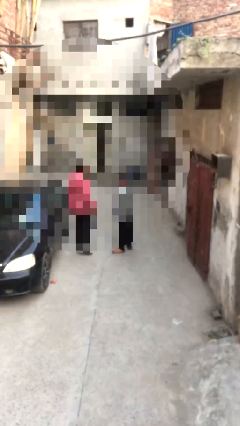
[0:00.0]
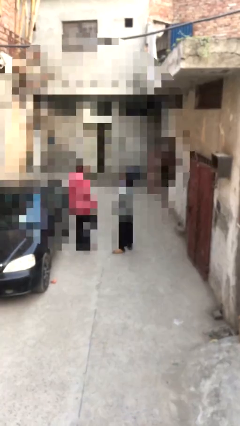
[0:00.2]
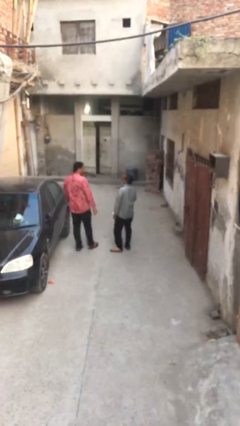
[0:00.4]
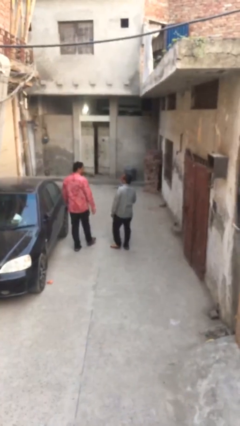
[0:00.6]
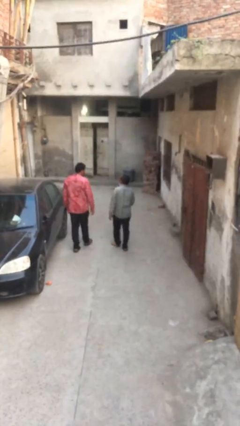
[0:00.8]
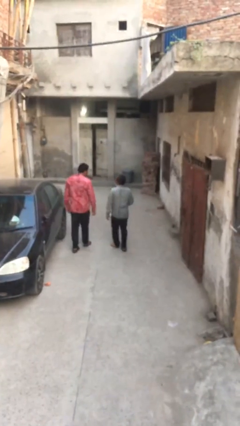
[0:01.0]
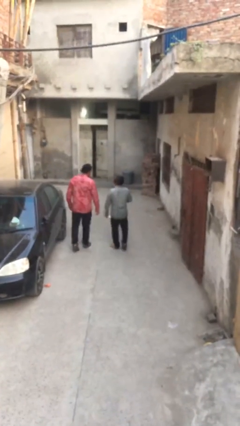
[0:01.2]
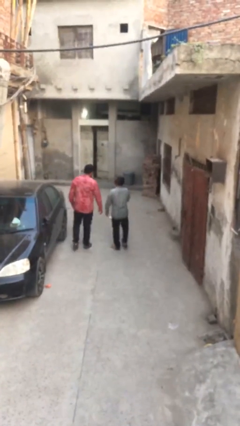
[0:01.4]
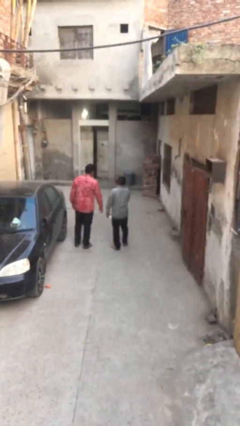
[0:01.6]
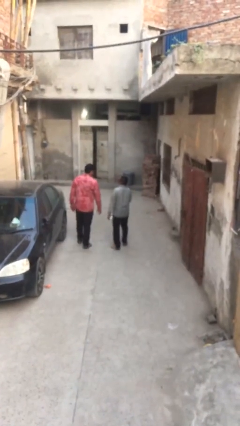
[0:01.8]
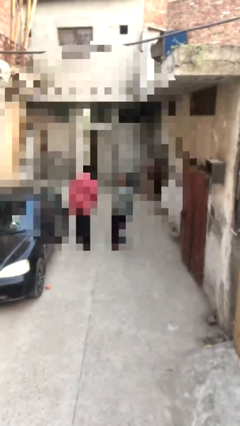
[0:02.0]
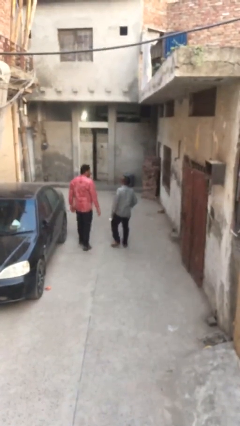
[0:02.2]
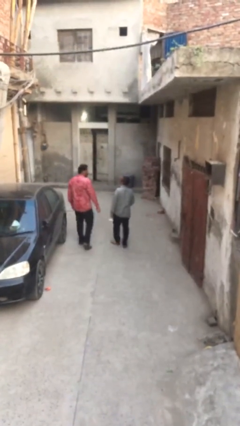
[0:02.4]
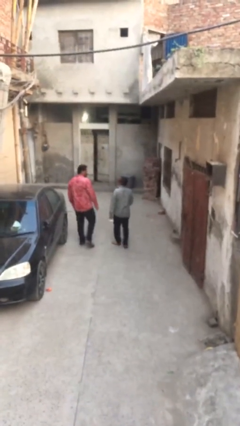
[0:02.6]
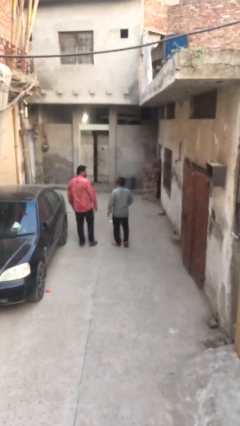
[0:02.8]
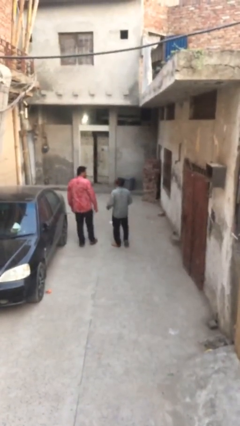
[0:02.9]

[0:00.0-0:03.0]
person talks to person

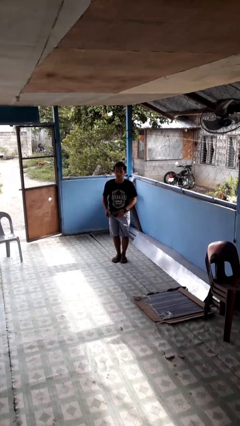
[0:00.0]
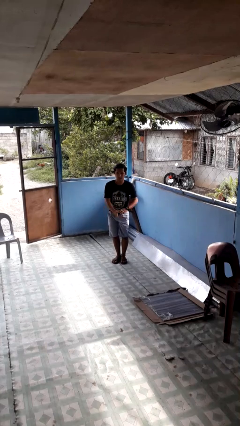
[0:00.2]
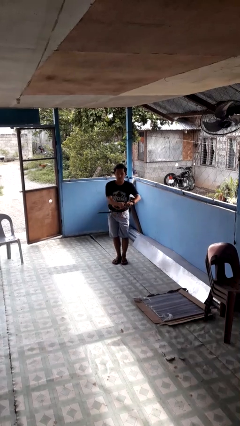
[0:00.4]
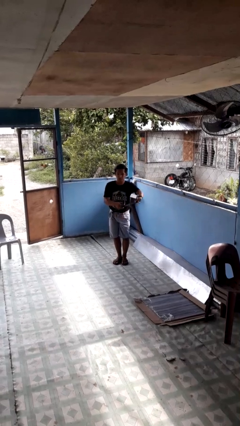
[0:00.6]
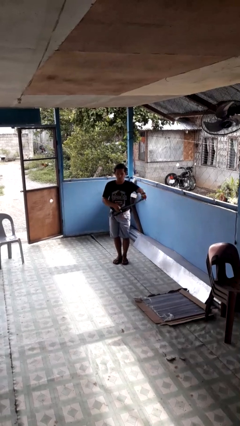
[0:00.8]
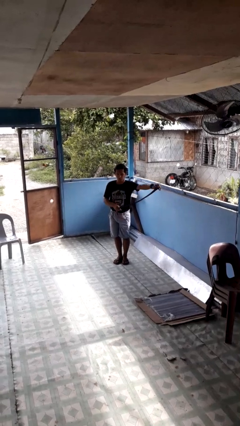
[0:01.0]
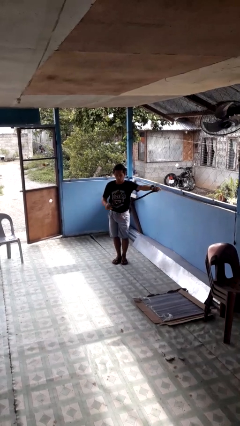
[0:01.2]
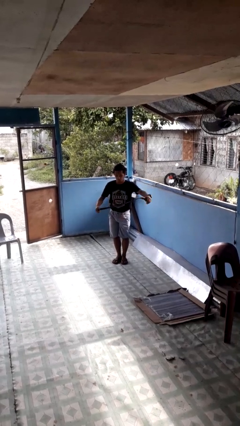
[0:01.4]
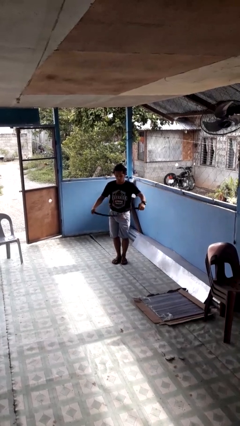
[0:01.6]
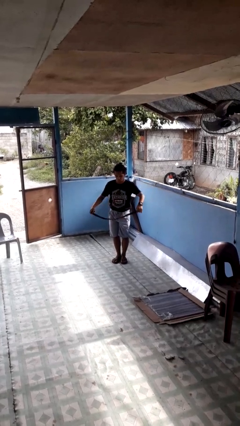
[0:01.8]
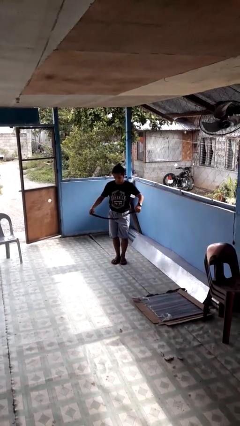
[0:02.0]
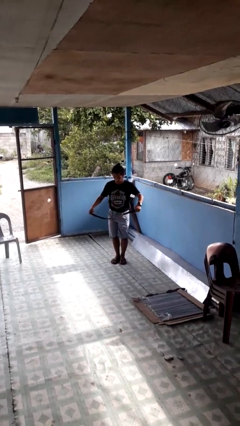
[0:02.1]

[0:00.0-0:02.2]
person takes off belt

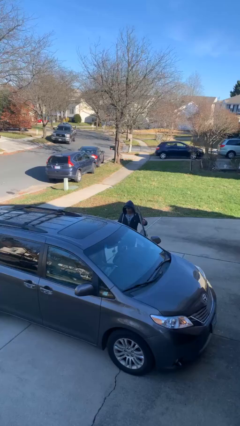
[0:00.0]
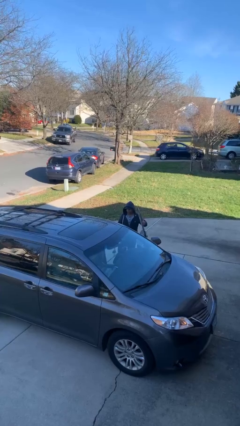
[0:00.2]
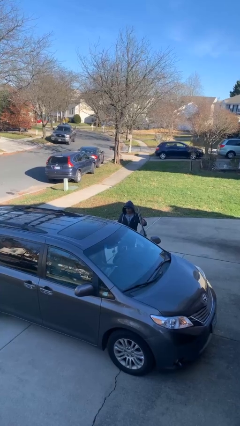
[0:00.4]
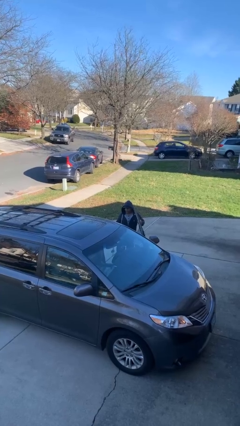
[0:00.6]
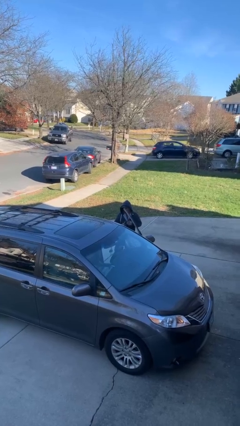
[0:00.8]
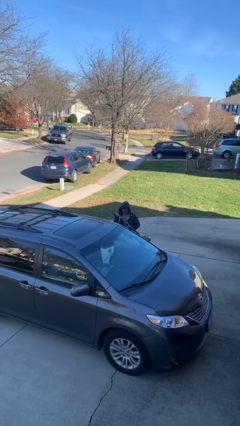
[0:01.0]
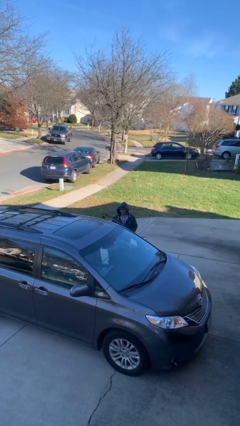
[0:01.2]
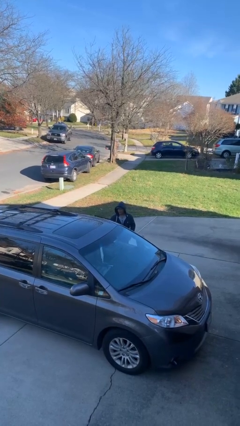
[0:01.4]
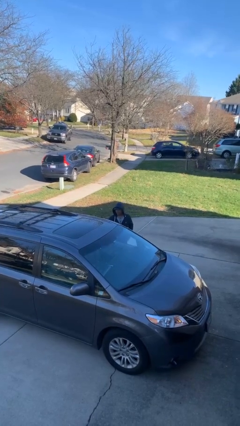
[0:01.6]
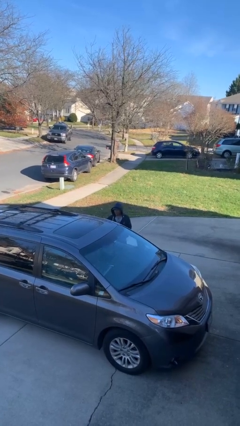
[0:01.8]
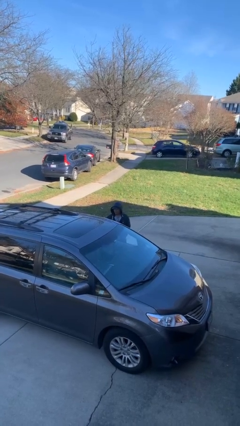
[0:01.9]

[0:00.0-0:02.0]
person closes car door

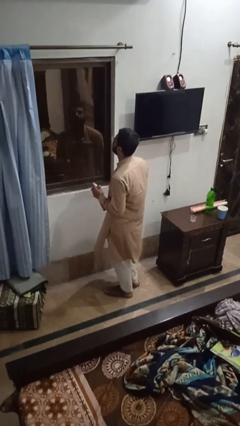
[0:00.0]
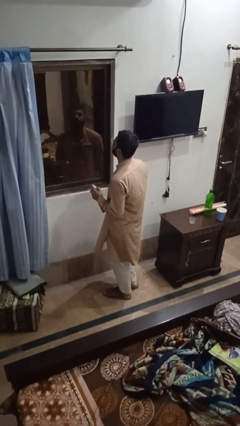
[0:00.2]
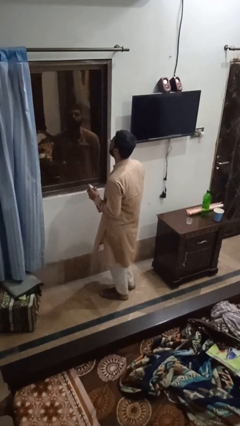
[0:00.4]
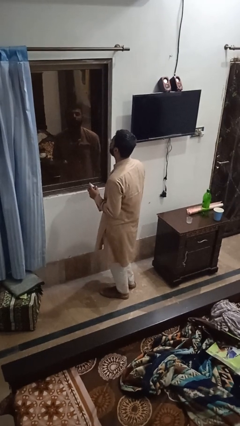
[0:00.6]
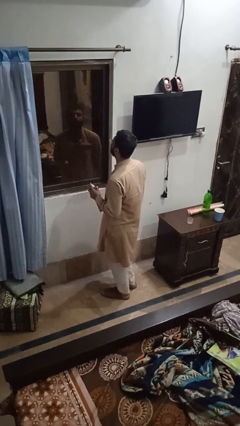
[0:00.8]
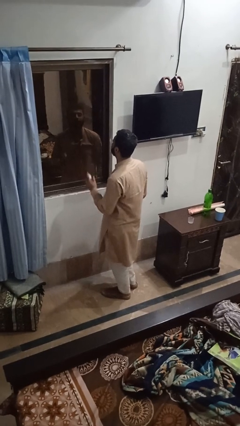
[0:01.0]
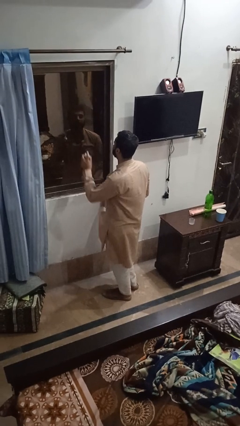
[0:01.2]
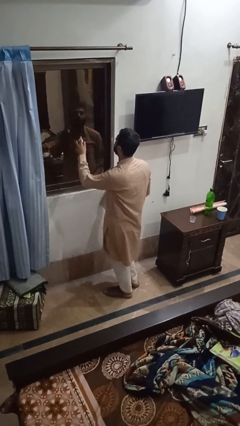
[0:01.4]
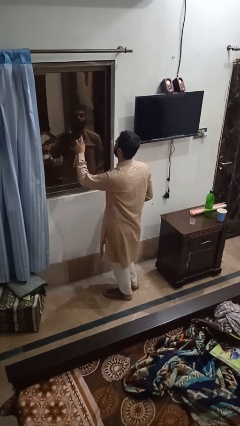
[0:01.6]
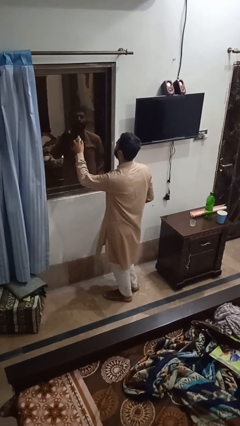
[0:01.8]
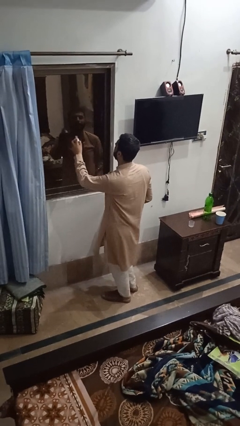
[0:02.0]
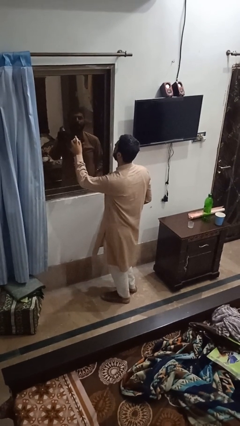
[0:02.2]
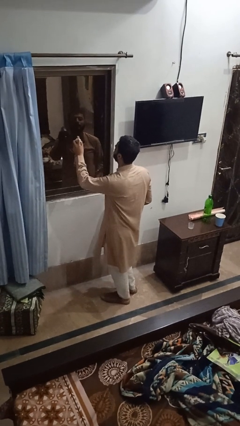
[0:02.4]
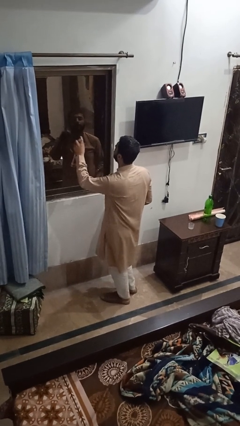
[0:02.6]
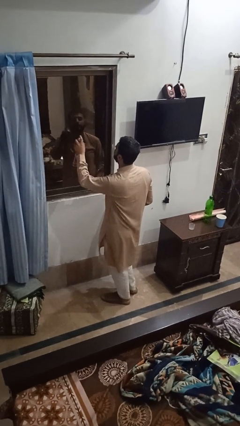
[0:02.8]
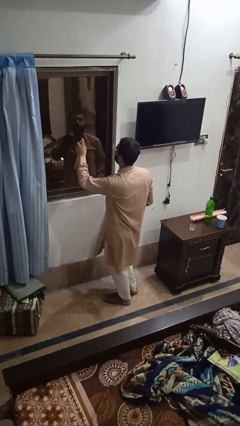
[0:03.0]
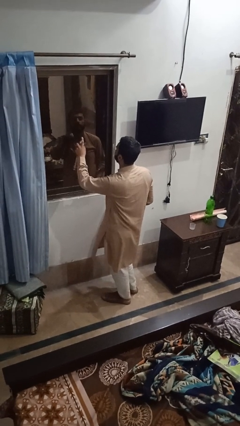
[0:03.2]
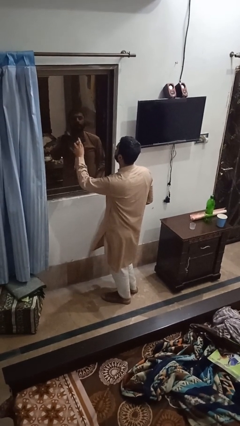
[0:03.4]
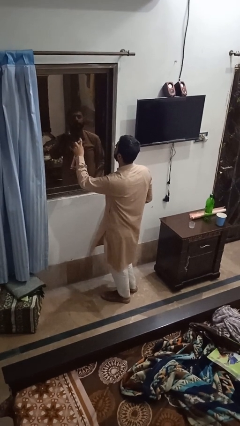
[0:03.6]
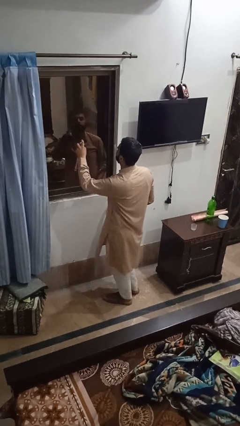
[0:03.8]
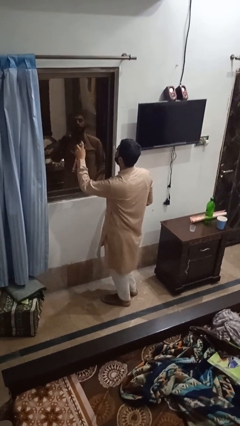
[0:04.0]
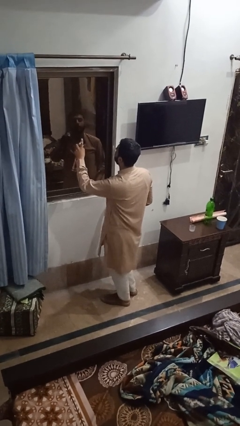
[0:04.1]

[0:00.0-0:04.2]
person sprays from bottle

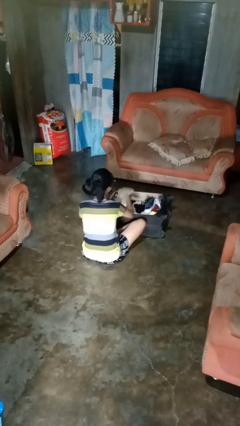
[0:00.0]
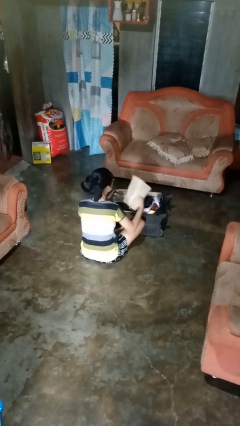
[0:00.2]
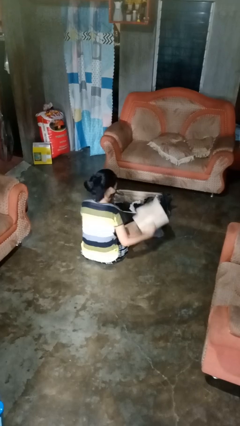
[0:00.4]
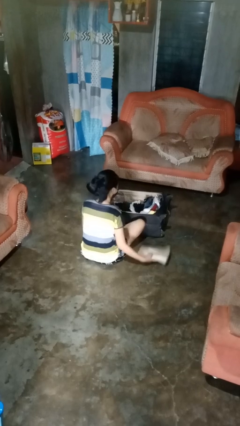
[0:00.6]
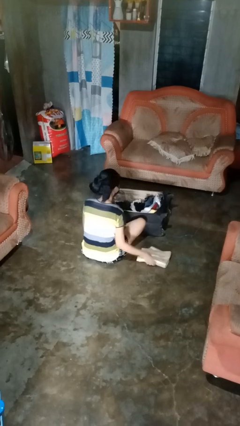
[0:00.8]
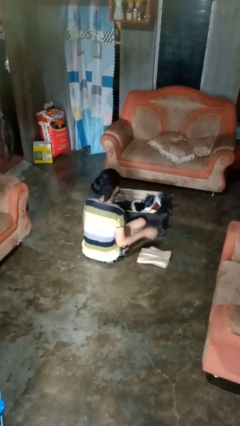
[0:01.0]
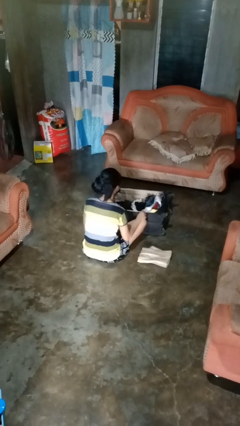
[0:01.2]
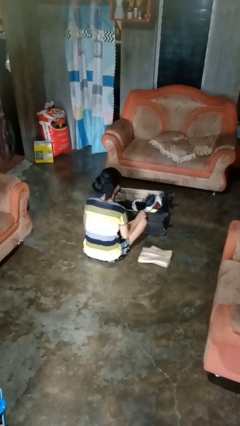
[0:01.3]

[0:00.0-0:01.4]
person unloads clothes from suitcase

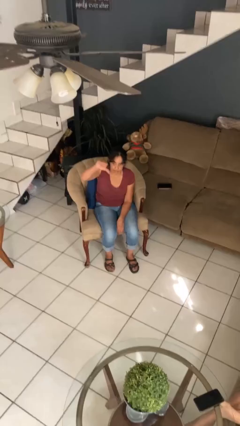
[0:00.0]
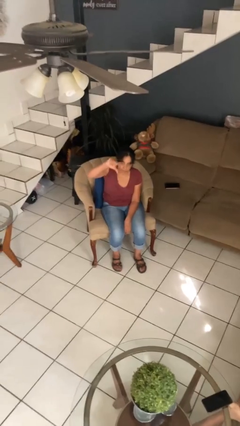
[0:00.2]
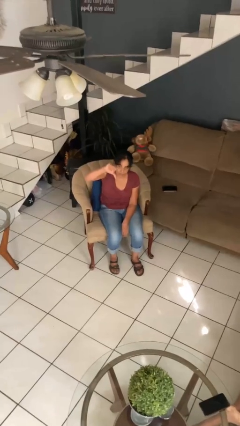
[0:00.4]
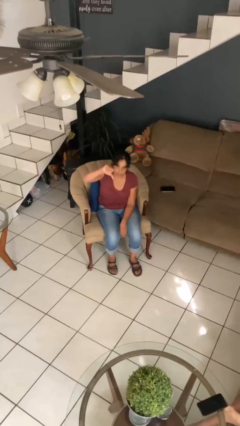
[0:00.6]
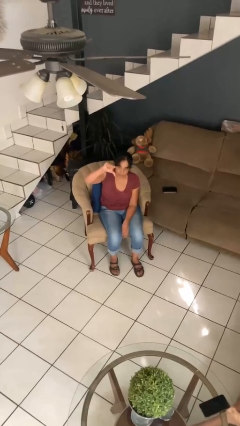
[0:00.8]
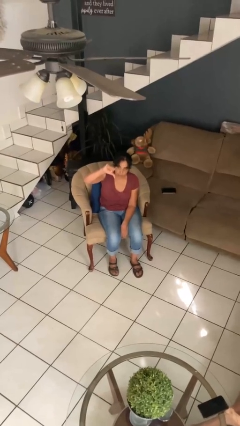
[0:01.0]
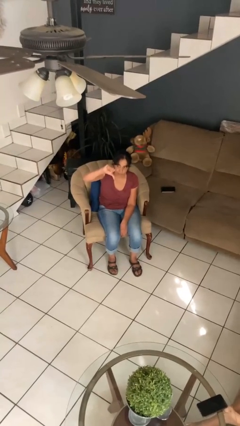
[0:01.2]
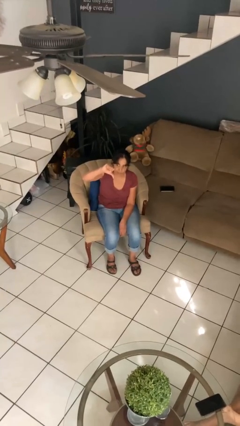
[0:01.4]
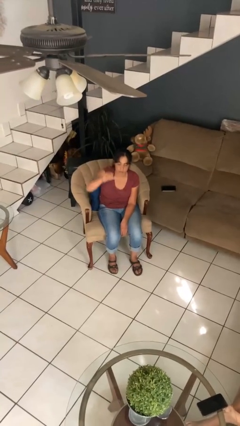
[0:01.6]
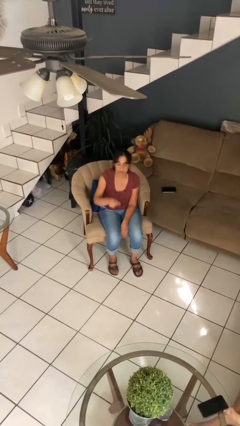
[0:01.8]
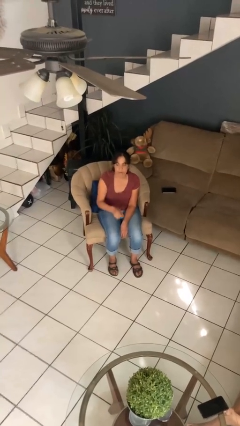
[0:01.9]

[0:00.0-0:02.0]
person gestures thumbs down

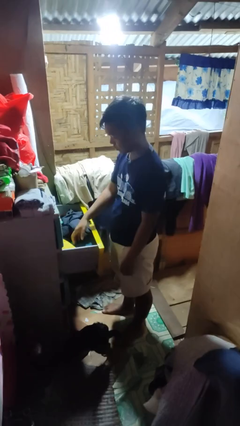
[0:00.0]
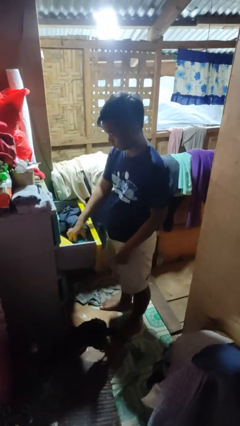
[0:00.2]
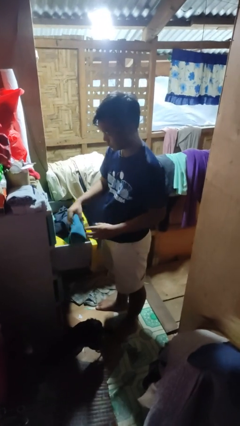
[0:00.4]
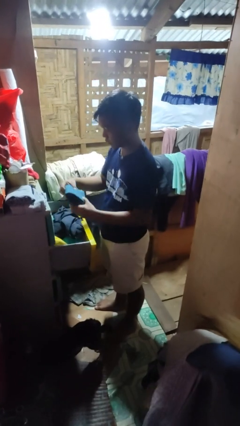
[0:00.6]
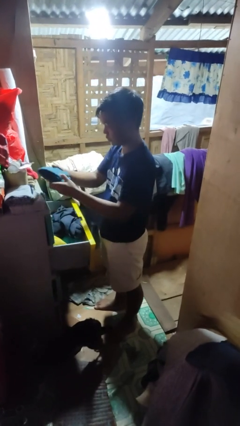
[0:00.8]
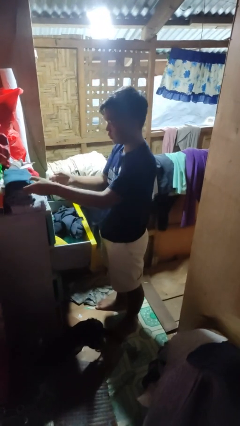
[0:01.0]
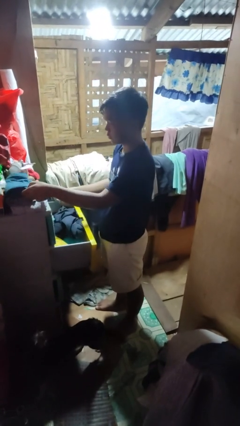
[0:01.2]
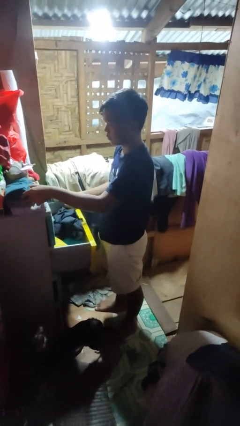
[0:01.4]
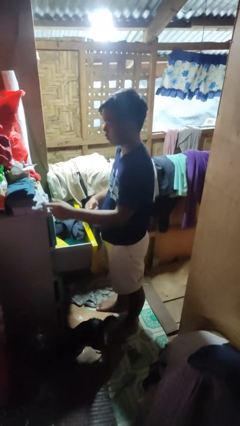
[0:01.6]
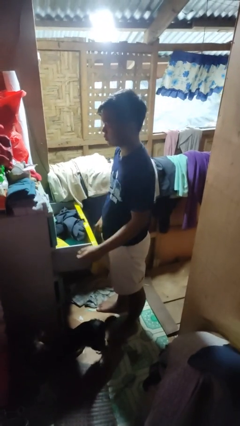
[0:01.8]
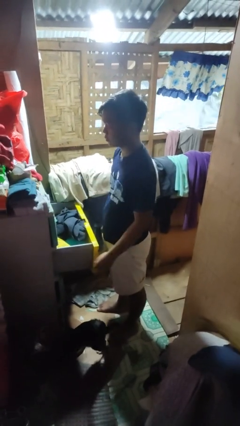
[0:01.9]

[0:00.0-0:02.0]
person takes clothes from dresser
